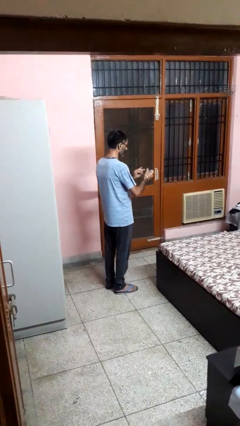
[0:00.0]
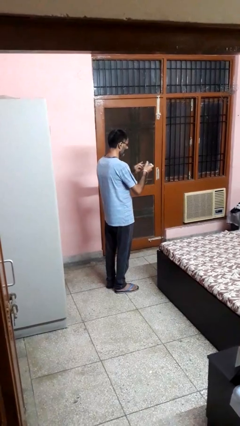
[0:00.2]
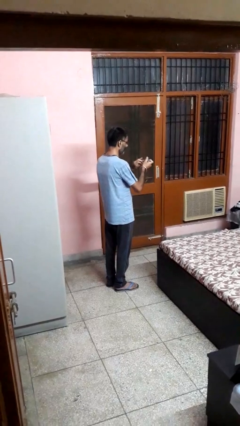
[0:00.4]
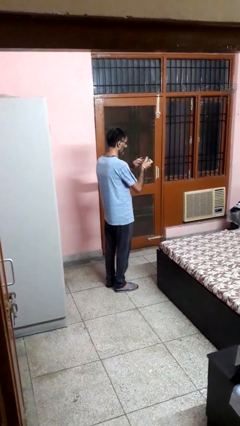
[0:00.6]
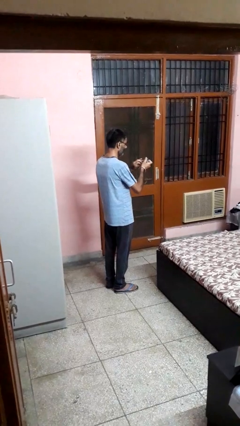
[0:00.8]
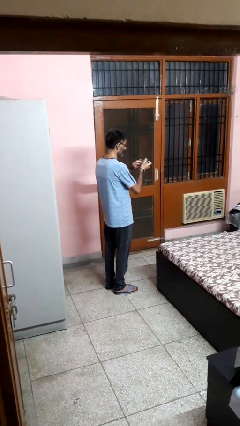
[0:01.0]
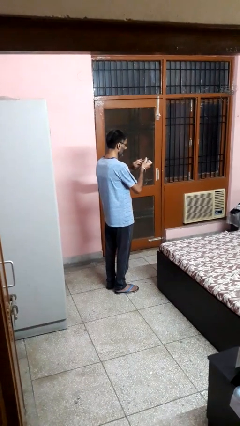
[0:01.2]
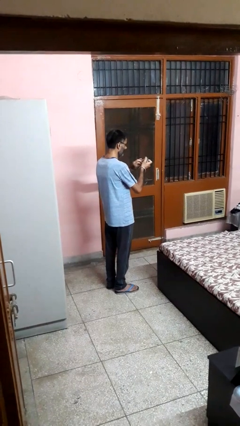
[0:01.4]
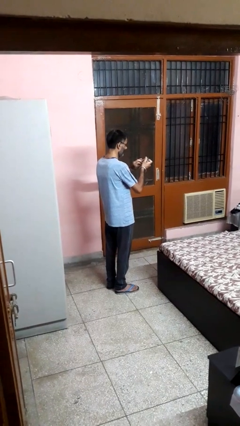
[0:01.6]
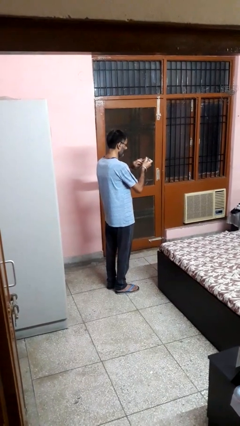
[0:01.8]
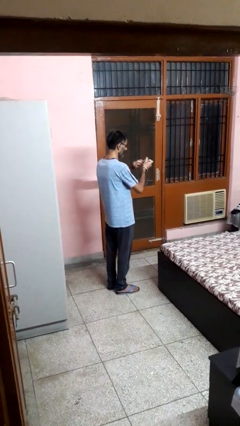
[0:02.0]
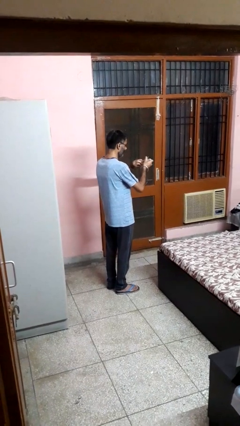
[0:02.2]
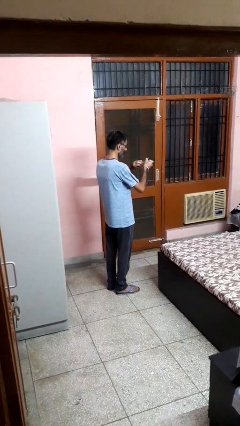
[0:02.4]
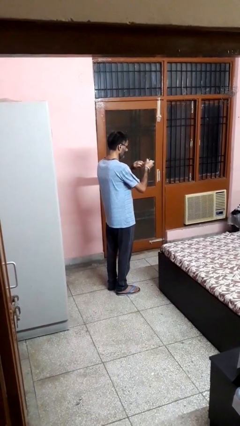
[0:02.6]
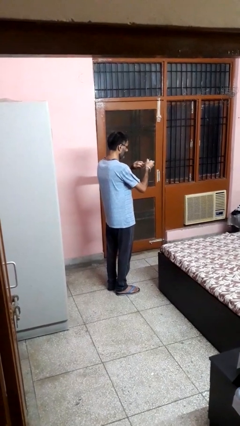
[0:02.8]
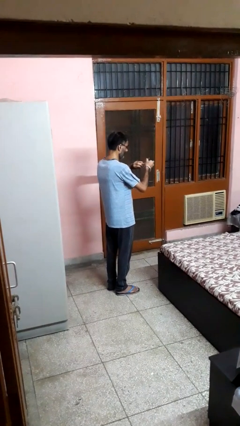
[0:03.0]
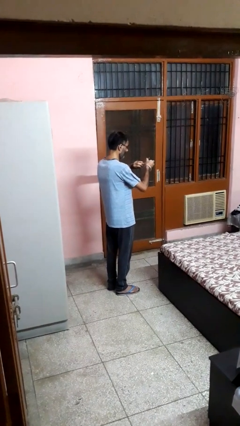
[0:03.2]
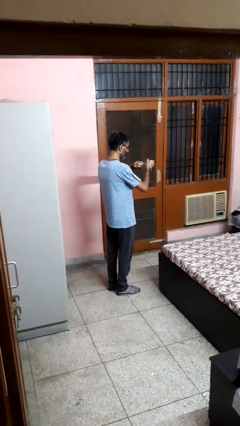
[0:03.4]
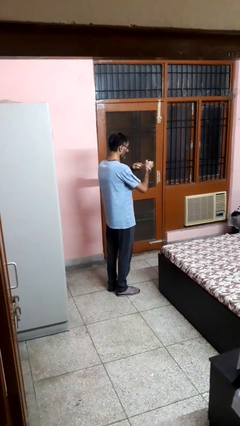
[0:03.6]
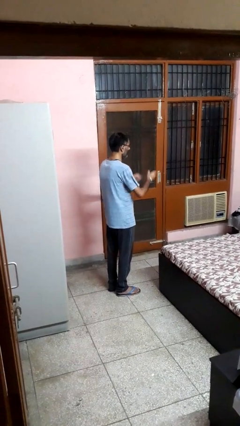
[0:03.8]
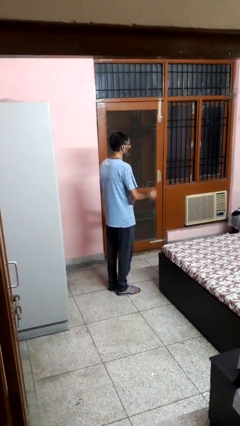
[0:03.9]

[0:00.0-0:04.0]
person clips fingernails

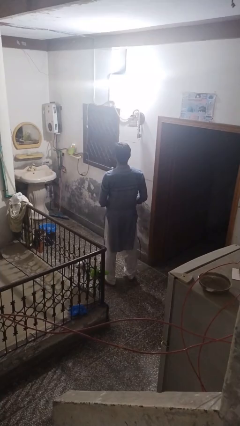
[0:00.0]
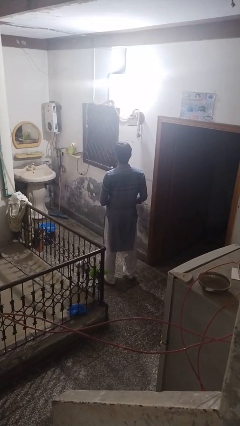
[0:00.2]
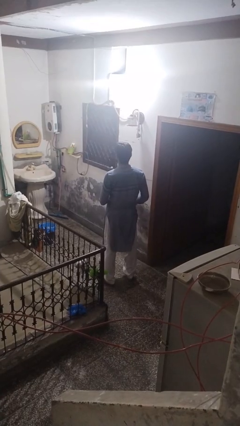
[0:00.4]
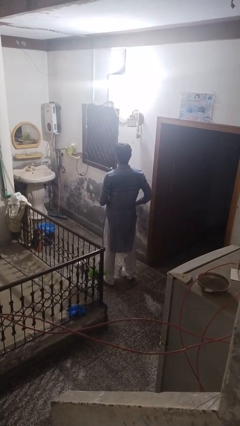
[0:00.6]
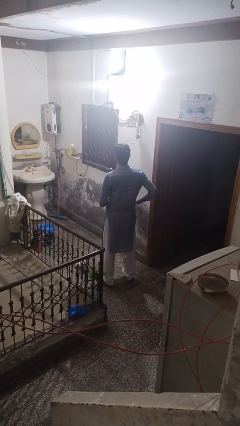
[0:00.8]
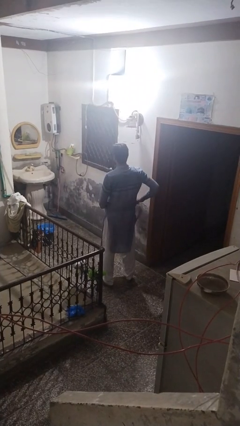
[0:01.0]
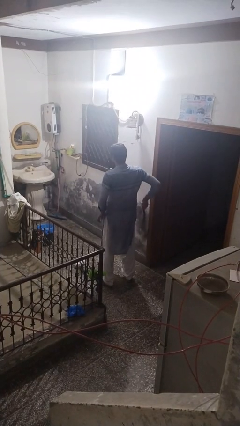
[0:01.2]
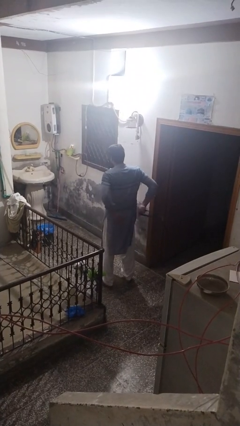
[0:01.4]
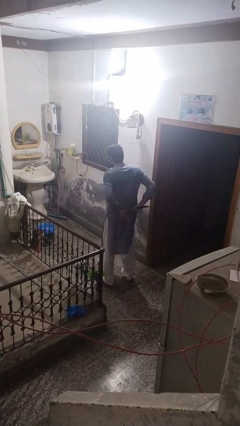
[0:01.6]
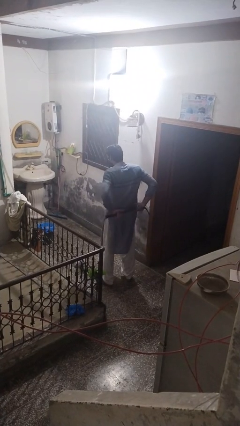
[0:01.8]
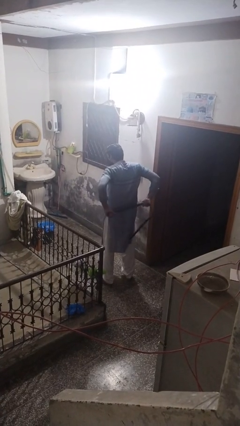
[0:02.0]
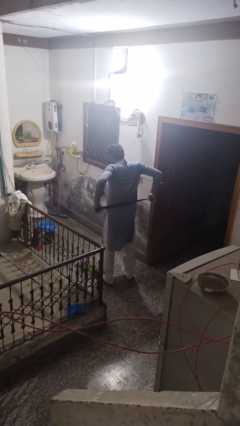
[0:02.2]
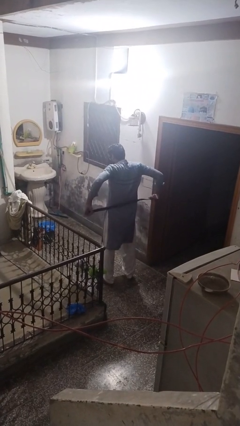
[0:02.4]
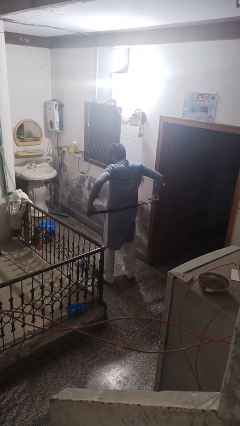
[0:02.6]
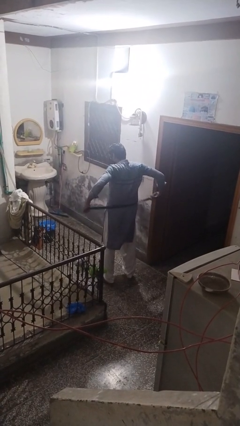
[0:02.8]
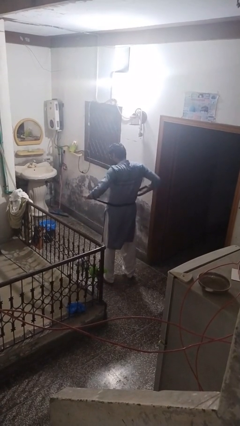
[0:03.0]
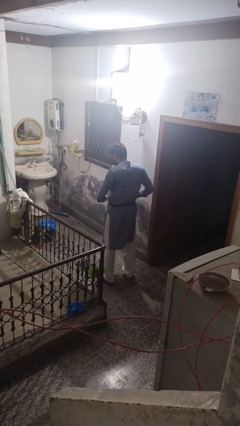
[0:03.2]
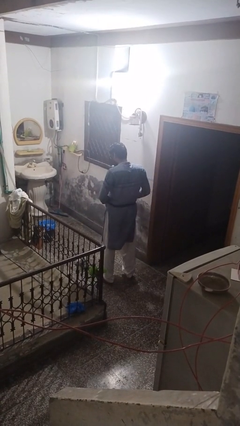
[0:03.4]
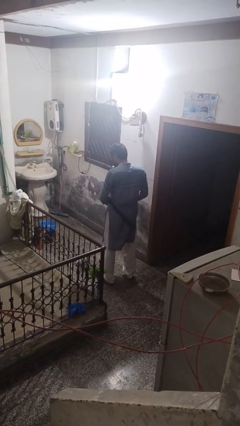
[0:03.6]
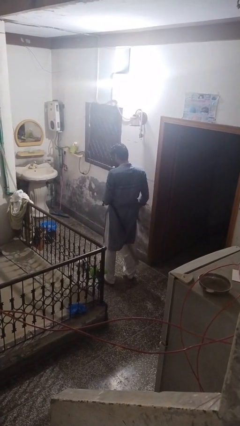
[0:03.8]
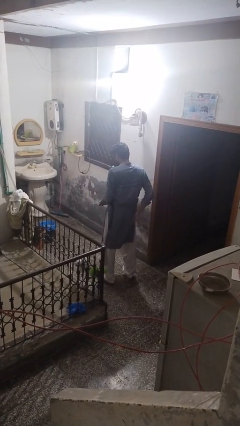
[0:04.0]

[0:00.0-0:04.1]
person puts on belt

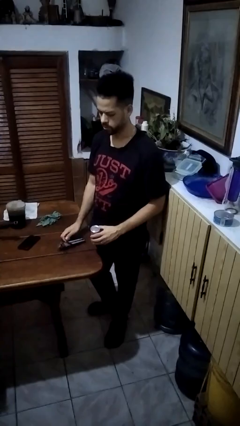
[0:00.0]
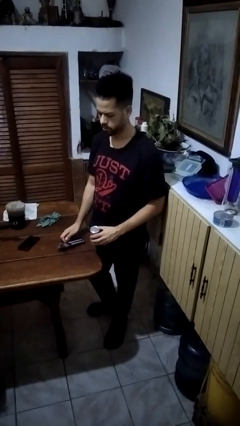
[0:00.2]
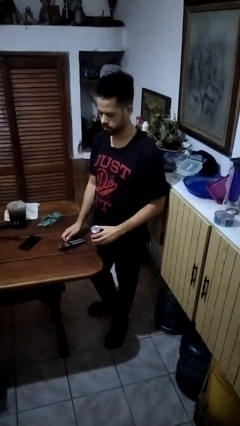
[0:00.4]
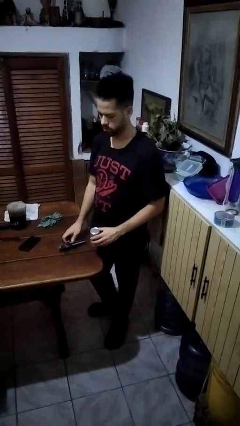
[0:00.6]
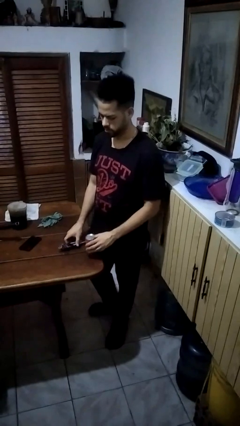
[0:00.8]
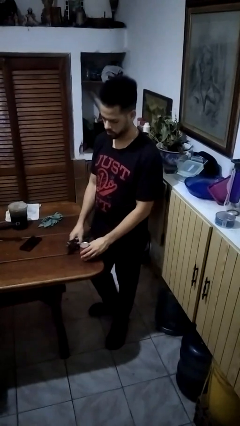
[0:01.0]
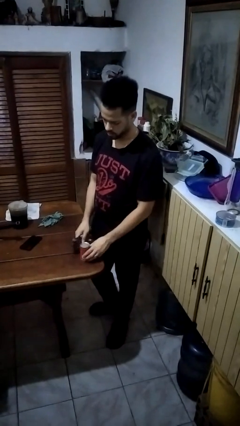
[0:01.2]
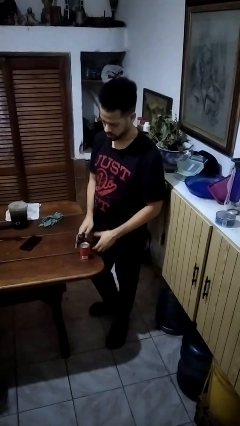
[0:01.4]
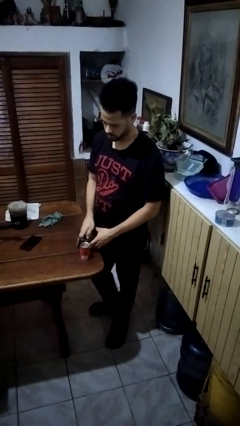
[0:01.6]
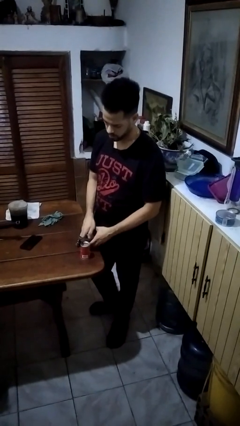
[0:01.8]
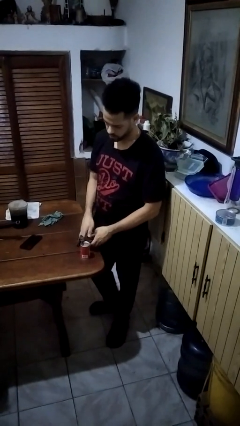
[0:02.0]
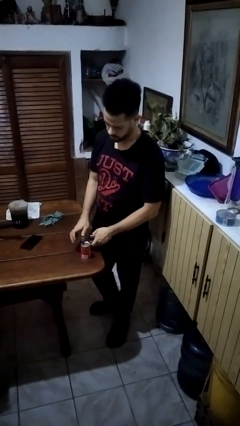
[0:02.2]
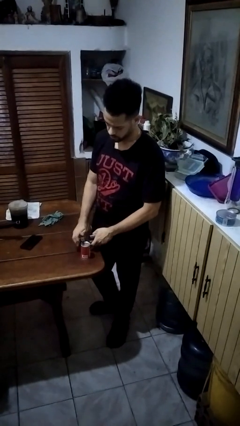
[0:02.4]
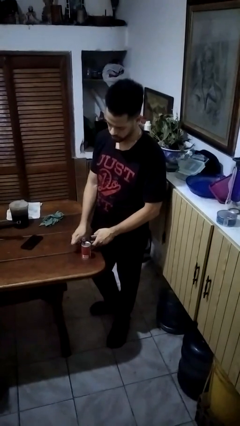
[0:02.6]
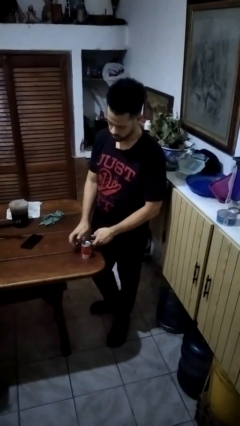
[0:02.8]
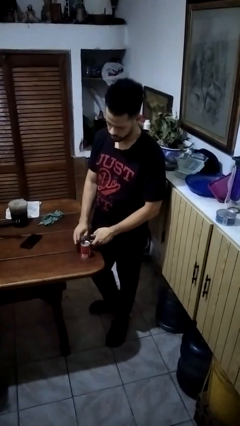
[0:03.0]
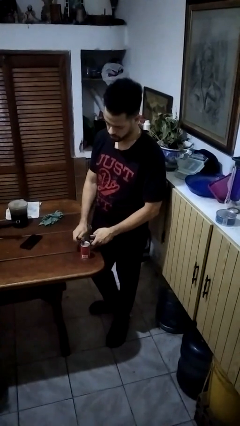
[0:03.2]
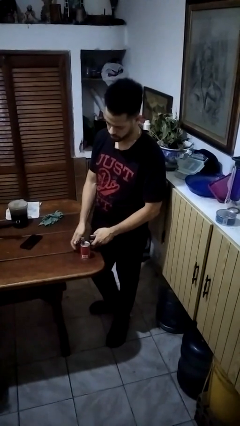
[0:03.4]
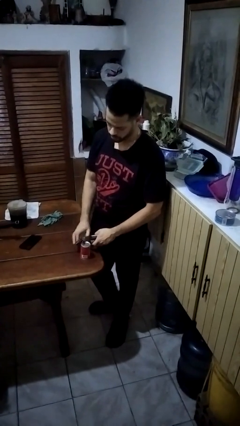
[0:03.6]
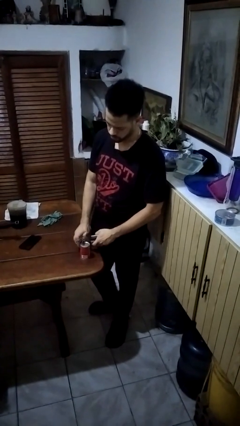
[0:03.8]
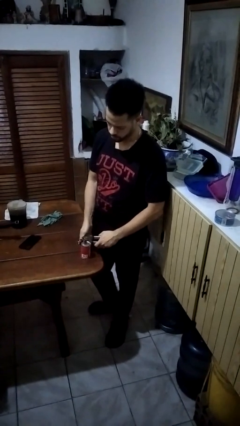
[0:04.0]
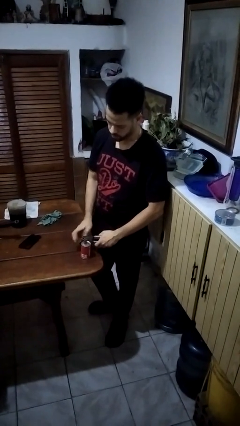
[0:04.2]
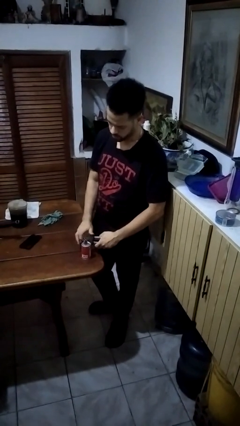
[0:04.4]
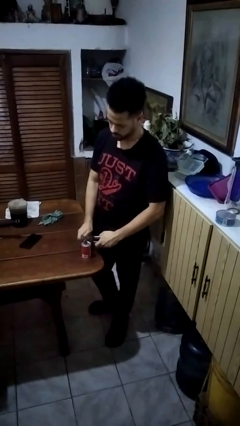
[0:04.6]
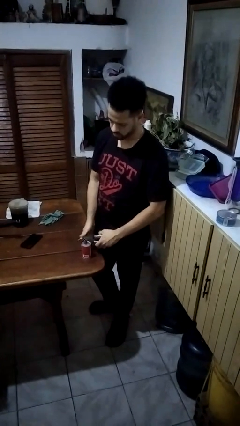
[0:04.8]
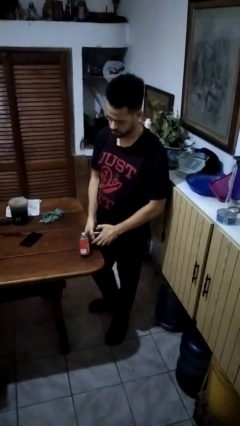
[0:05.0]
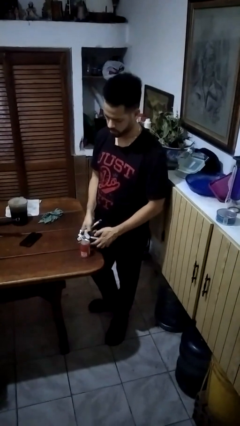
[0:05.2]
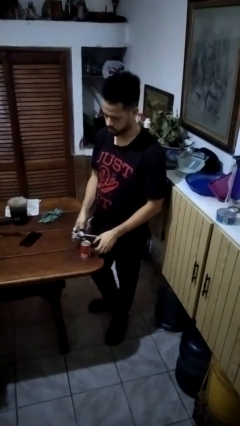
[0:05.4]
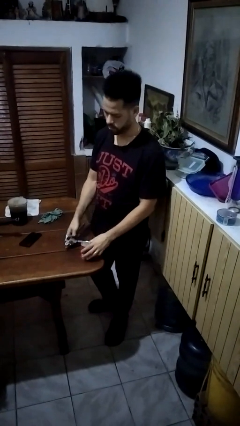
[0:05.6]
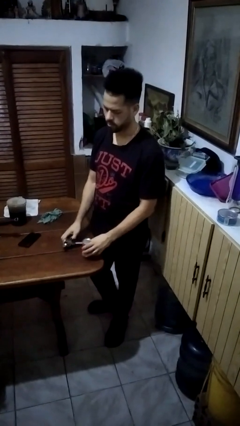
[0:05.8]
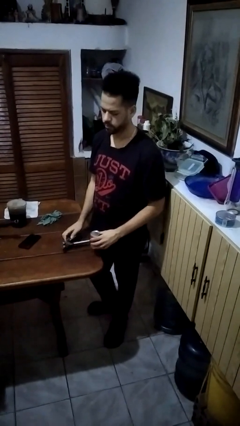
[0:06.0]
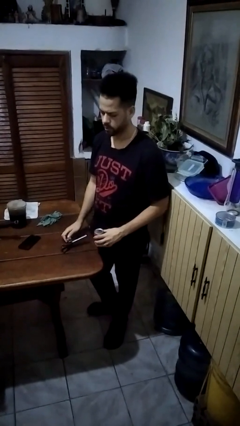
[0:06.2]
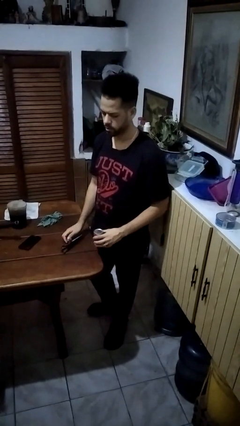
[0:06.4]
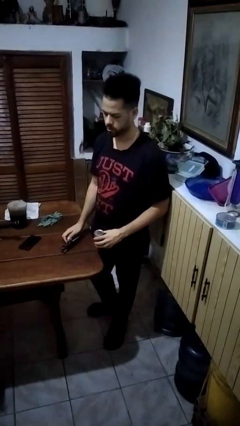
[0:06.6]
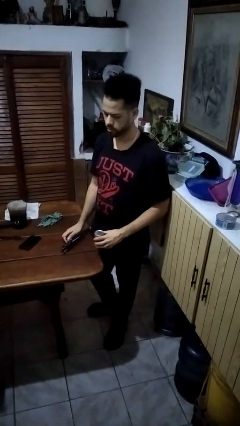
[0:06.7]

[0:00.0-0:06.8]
person opens can with can opener

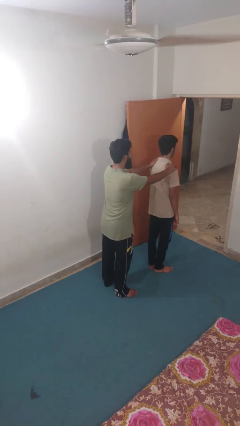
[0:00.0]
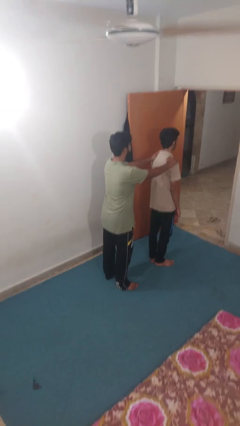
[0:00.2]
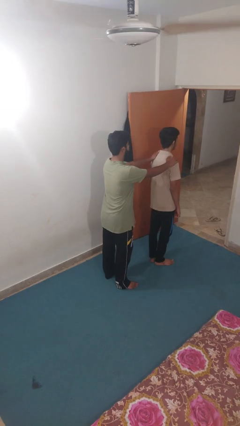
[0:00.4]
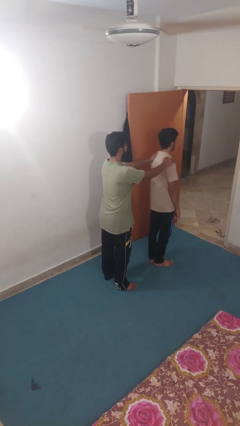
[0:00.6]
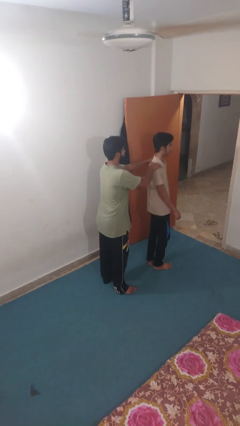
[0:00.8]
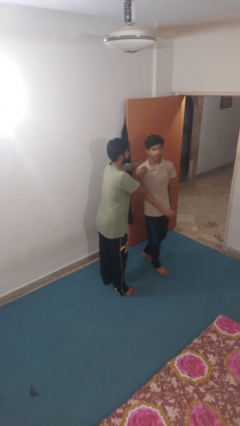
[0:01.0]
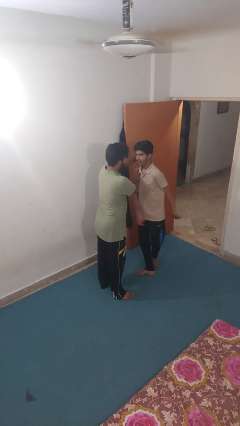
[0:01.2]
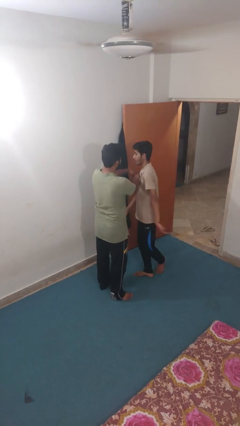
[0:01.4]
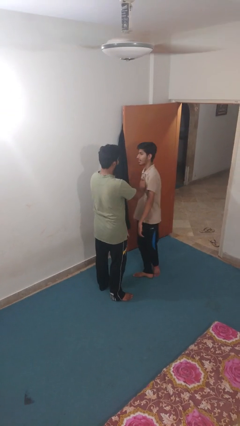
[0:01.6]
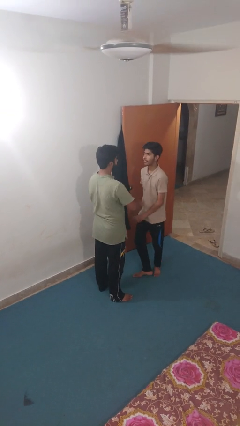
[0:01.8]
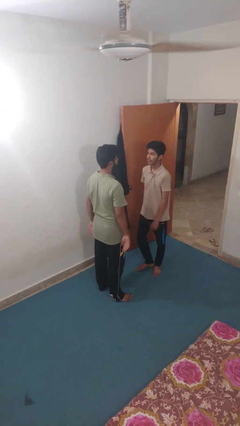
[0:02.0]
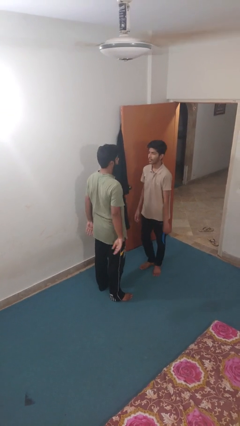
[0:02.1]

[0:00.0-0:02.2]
person spins person around

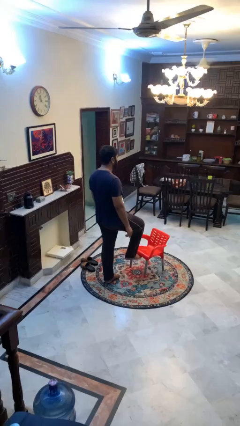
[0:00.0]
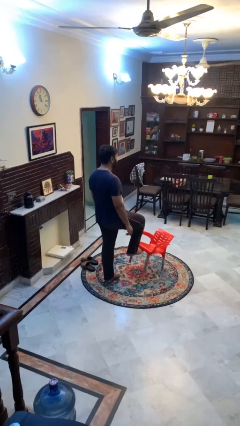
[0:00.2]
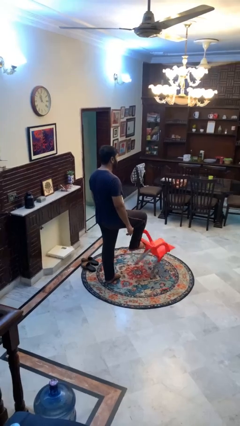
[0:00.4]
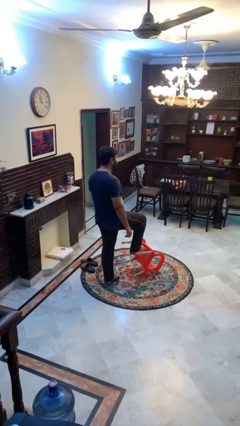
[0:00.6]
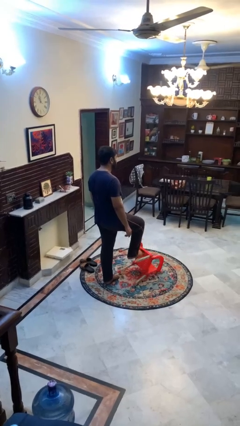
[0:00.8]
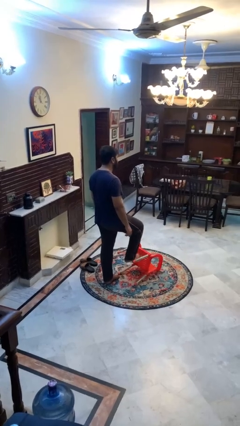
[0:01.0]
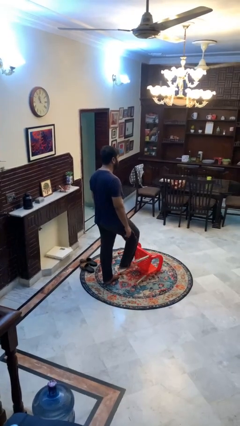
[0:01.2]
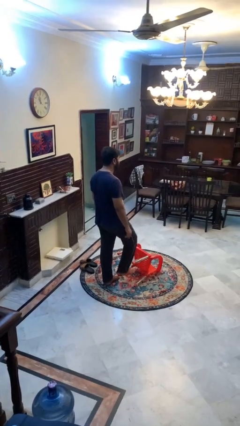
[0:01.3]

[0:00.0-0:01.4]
person knocks over furniture
